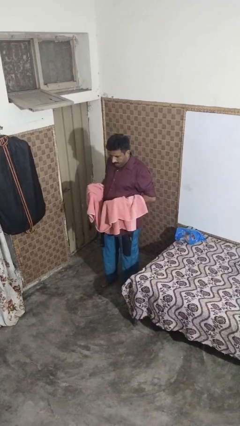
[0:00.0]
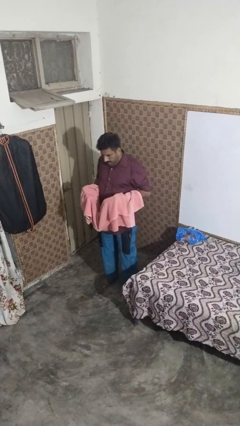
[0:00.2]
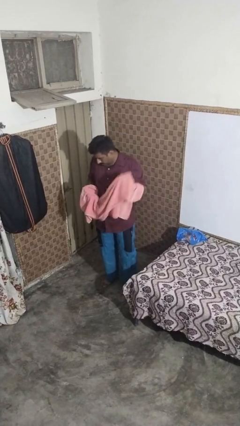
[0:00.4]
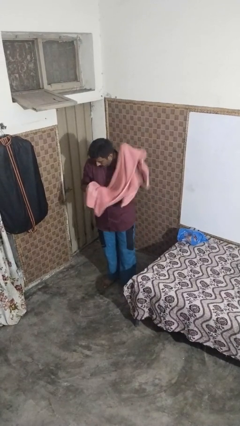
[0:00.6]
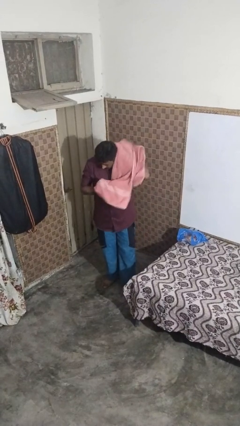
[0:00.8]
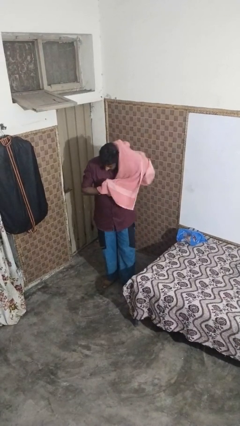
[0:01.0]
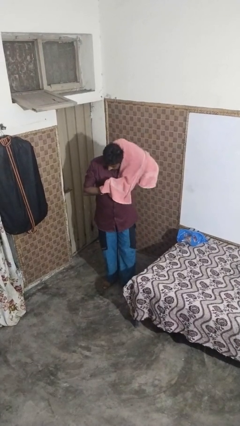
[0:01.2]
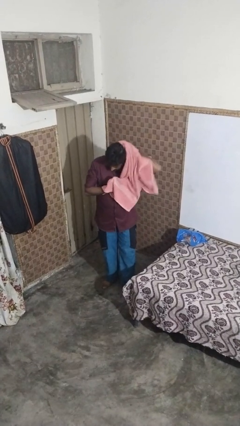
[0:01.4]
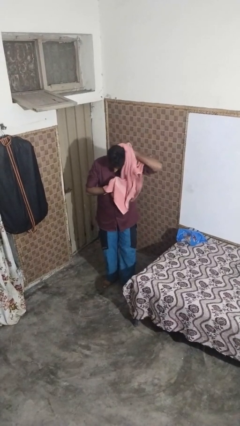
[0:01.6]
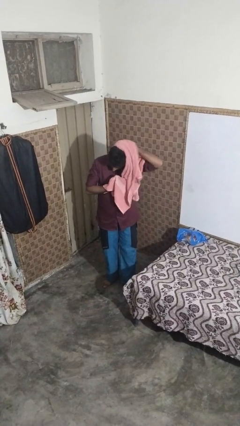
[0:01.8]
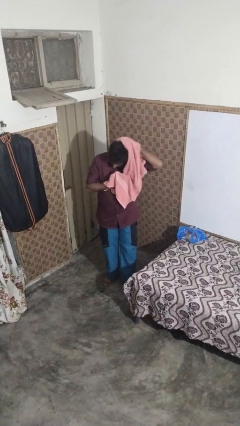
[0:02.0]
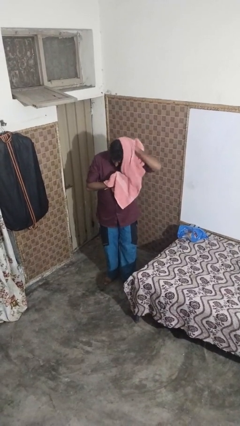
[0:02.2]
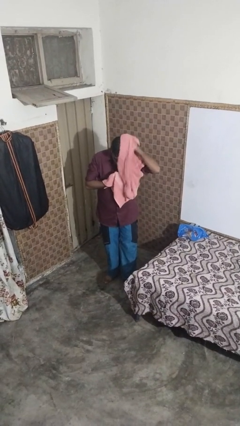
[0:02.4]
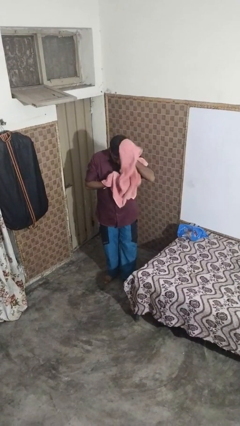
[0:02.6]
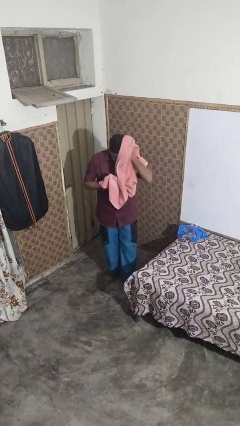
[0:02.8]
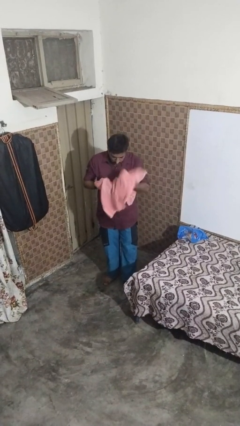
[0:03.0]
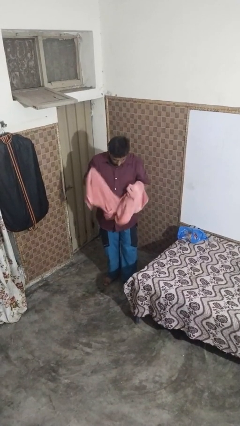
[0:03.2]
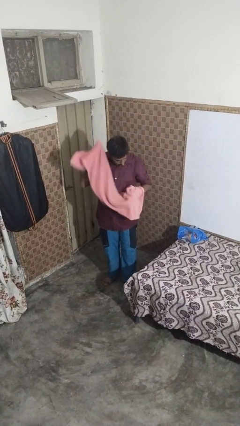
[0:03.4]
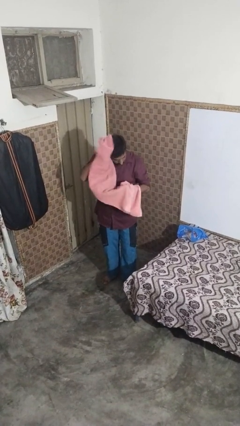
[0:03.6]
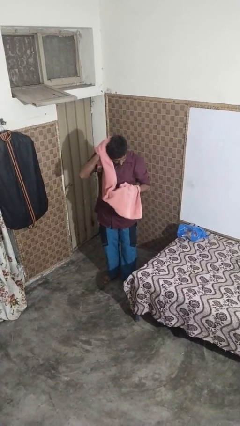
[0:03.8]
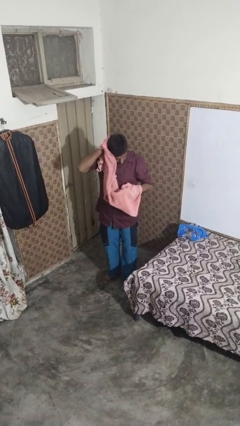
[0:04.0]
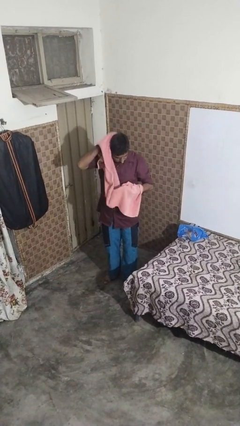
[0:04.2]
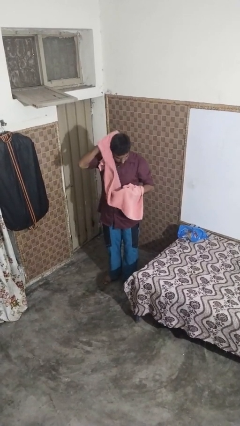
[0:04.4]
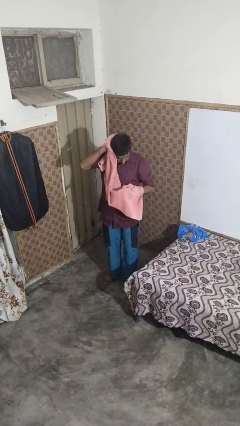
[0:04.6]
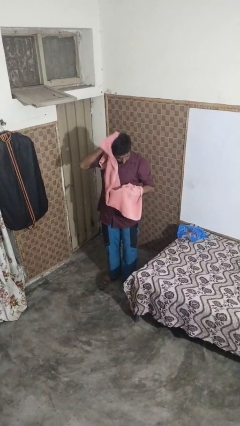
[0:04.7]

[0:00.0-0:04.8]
person dries hair with towel

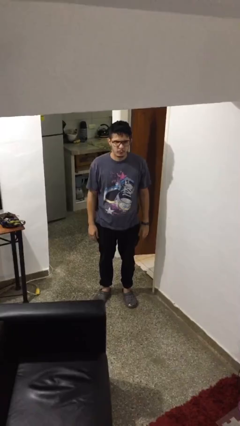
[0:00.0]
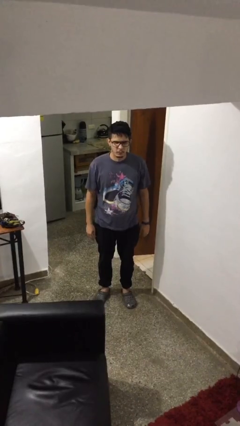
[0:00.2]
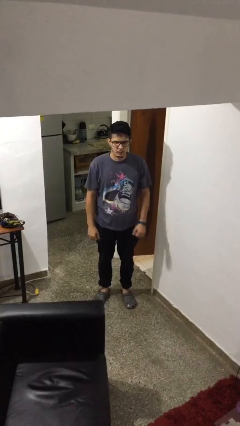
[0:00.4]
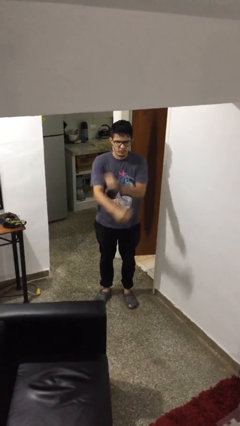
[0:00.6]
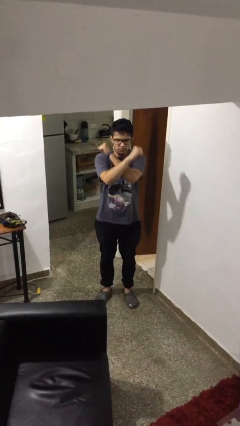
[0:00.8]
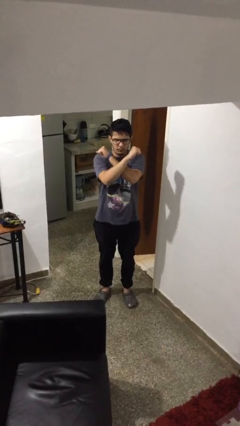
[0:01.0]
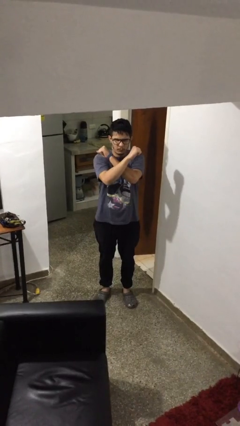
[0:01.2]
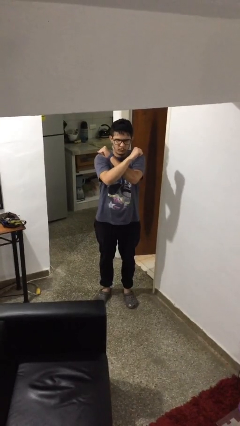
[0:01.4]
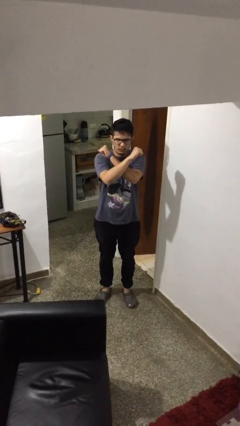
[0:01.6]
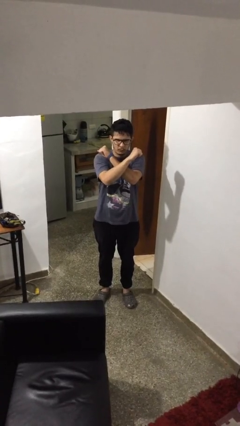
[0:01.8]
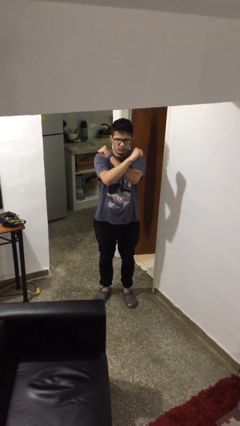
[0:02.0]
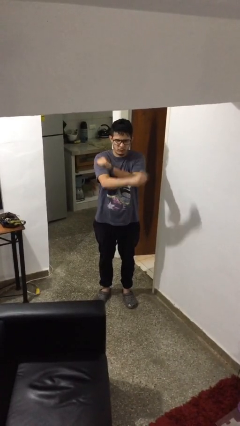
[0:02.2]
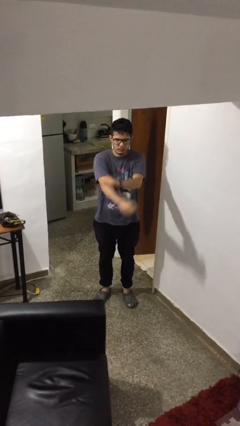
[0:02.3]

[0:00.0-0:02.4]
person gestures arms x

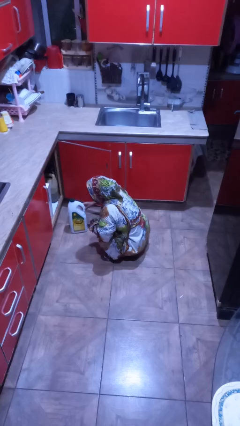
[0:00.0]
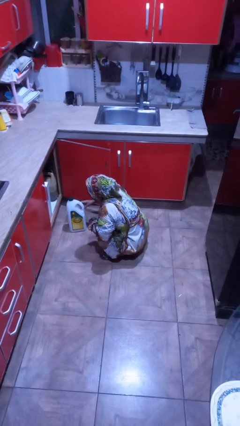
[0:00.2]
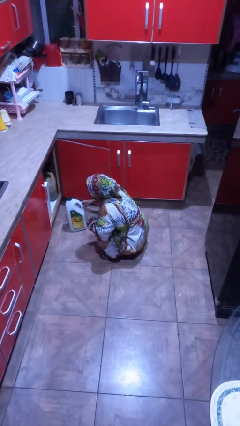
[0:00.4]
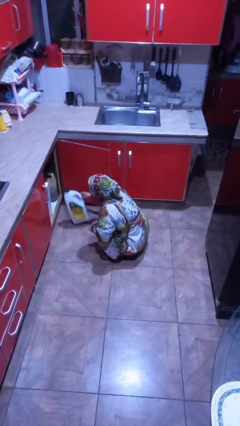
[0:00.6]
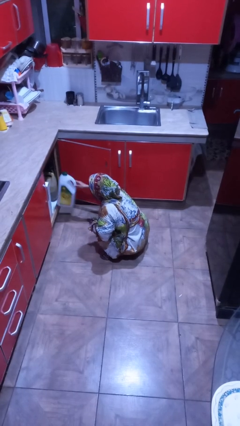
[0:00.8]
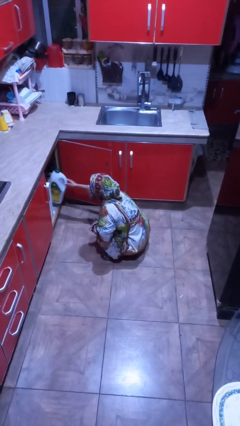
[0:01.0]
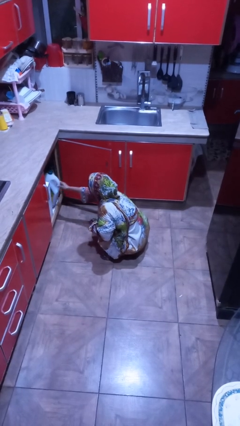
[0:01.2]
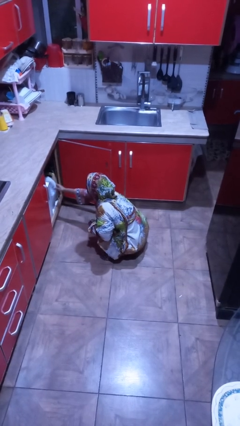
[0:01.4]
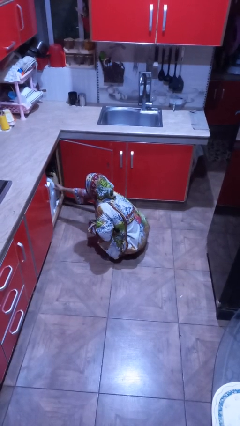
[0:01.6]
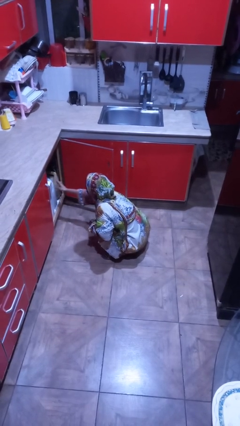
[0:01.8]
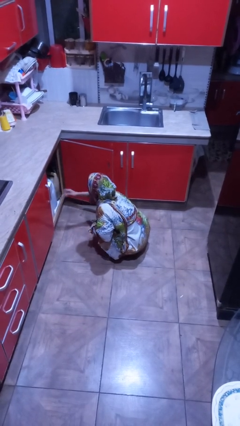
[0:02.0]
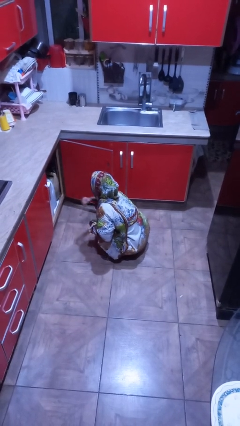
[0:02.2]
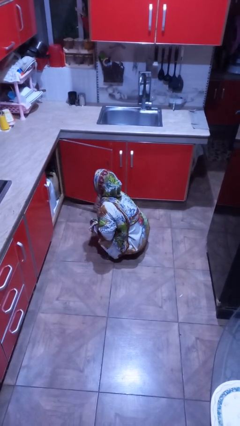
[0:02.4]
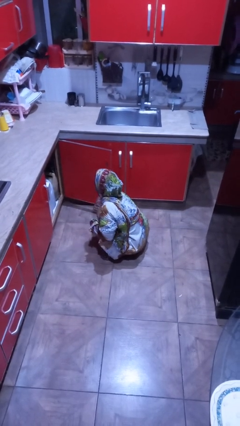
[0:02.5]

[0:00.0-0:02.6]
person puts object in cabinet

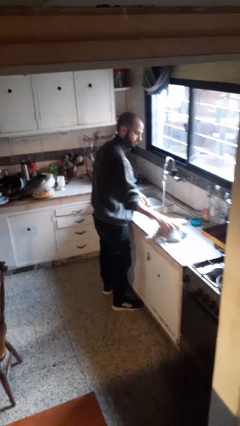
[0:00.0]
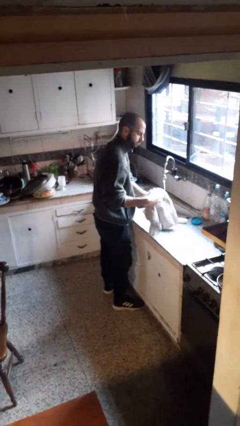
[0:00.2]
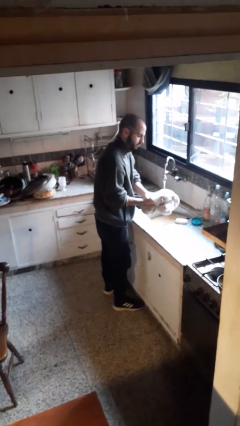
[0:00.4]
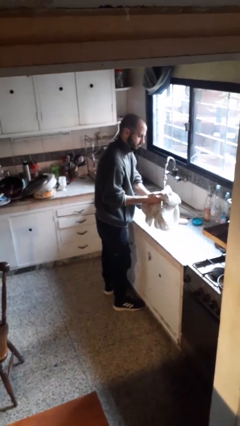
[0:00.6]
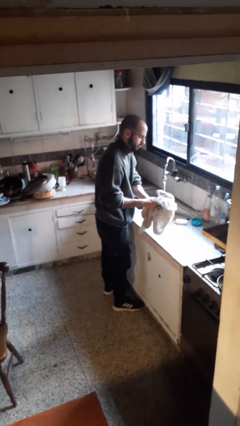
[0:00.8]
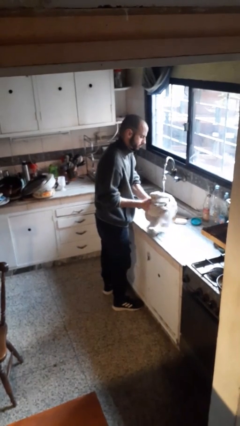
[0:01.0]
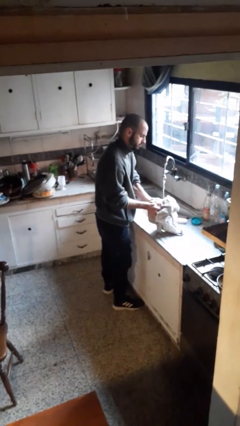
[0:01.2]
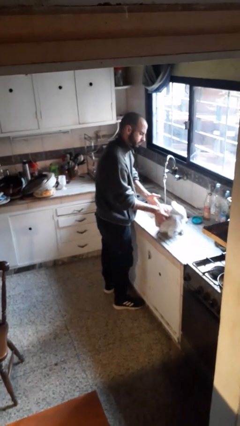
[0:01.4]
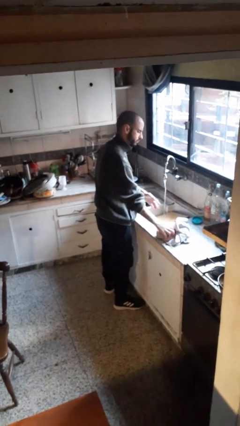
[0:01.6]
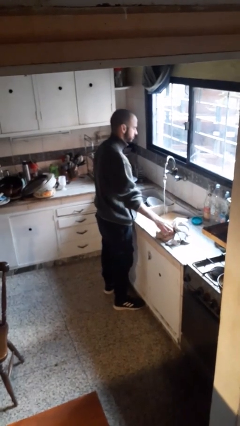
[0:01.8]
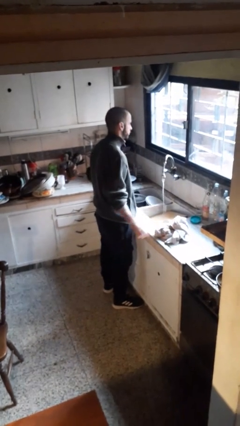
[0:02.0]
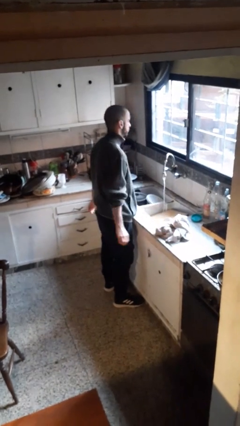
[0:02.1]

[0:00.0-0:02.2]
person dries hands with towel

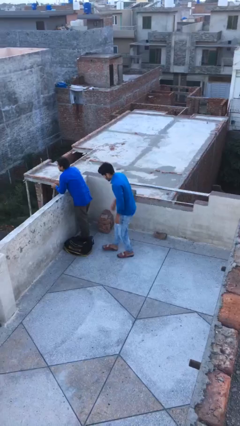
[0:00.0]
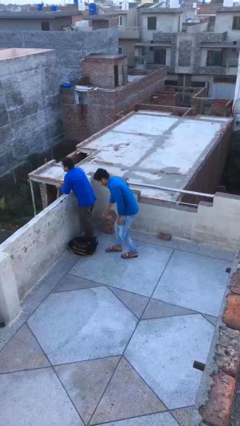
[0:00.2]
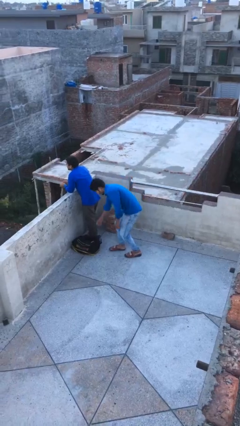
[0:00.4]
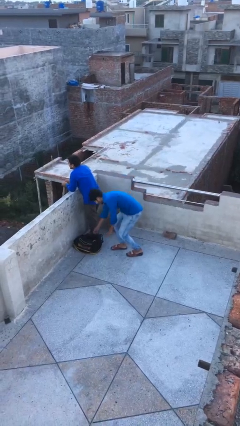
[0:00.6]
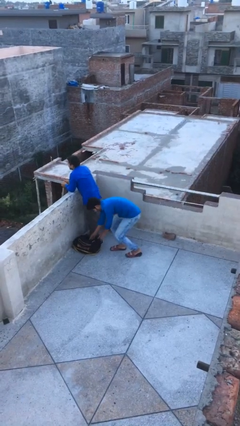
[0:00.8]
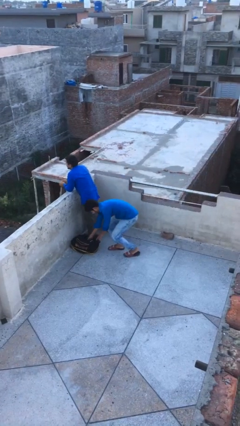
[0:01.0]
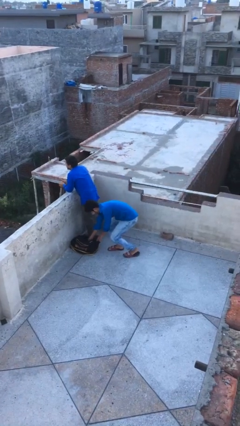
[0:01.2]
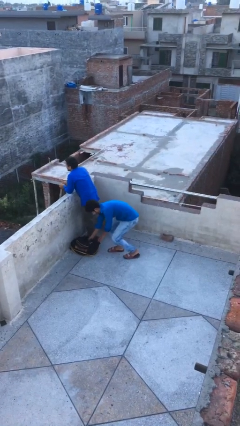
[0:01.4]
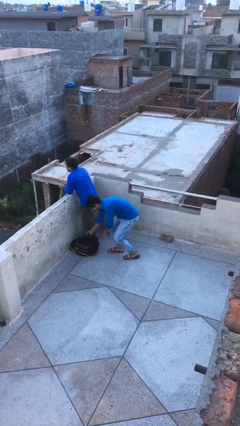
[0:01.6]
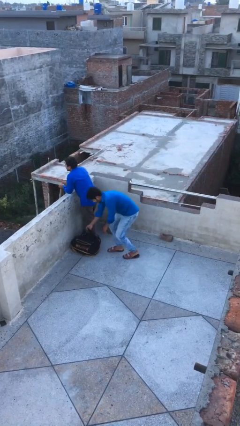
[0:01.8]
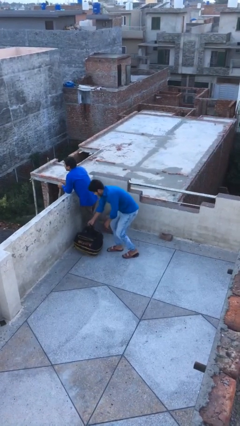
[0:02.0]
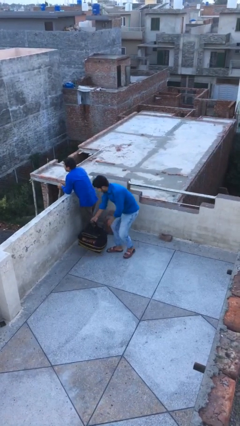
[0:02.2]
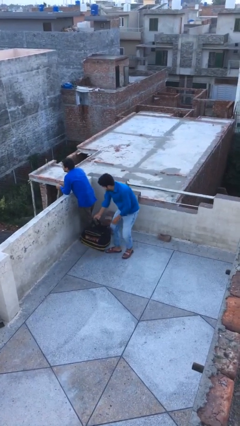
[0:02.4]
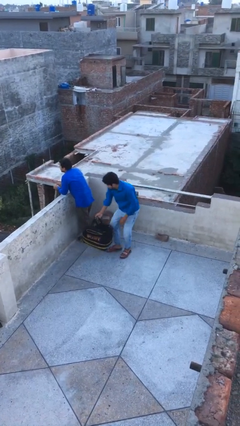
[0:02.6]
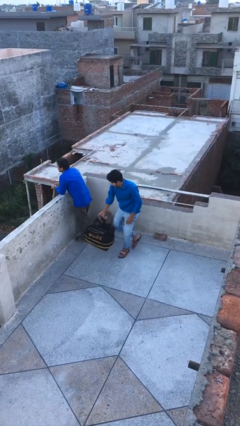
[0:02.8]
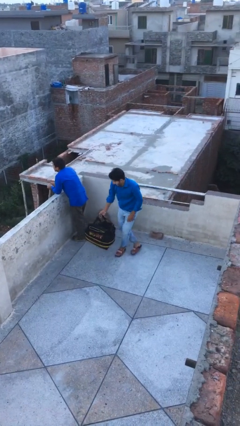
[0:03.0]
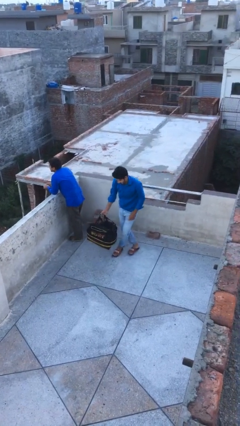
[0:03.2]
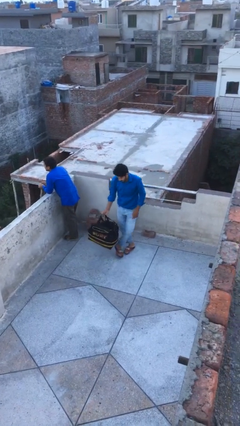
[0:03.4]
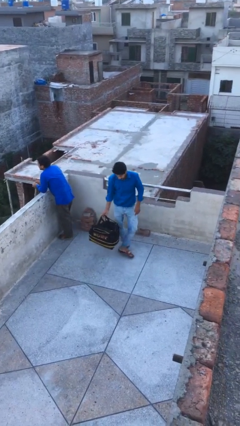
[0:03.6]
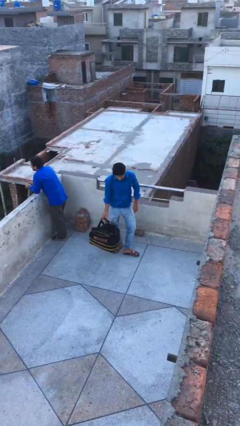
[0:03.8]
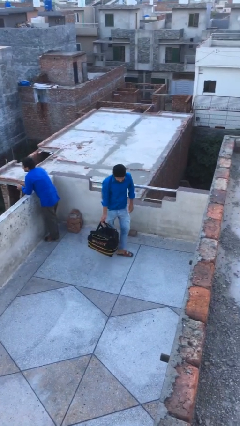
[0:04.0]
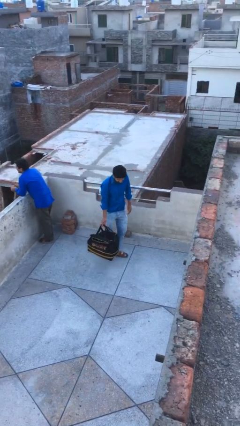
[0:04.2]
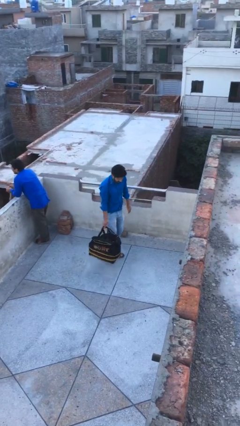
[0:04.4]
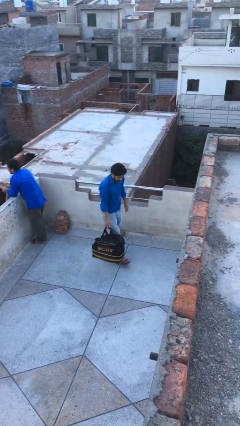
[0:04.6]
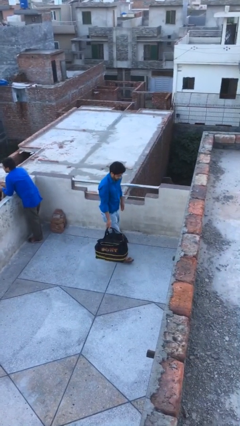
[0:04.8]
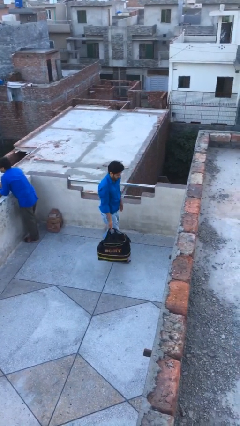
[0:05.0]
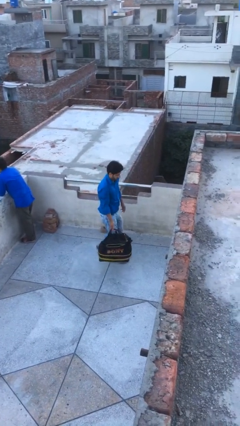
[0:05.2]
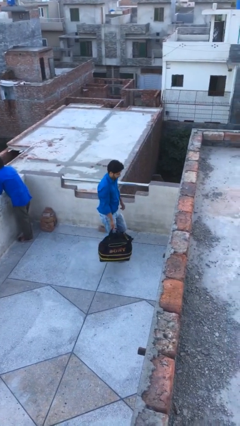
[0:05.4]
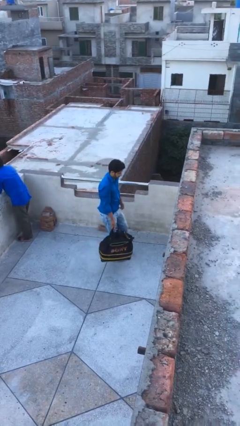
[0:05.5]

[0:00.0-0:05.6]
person steals object from person
